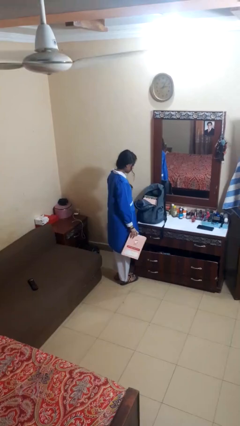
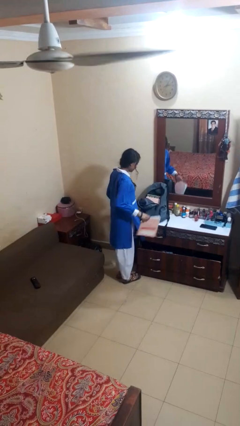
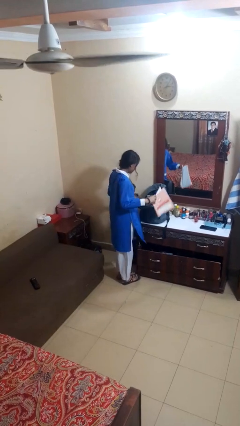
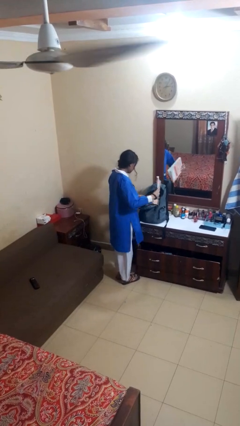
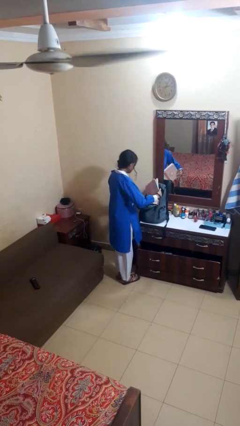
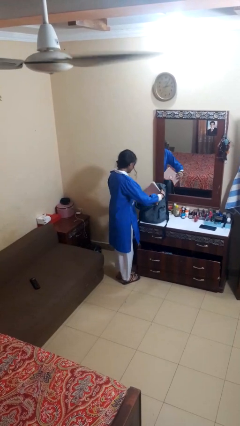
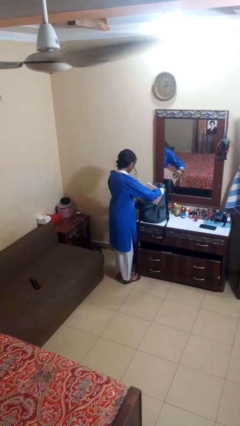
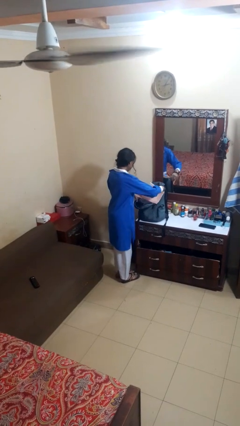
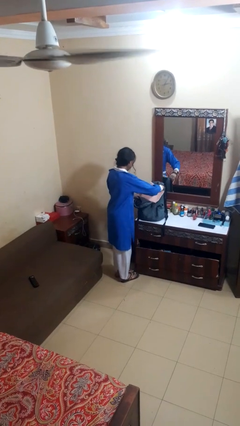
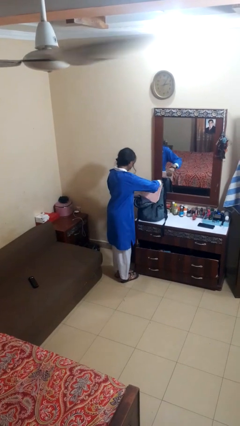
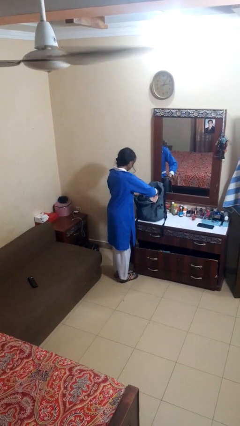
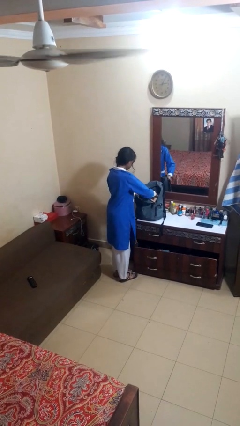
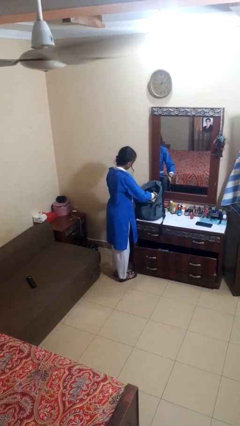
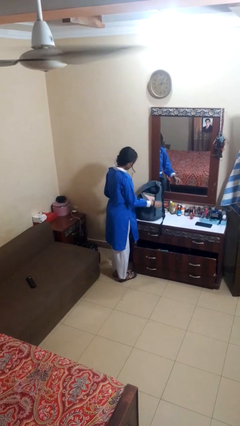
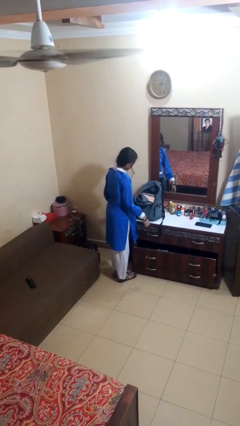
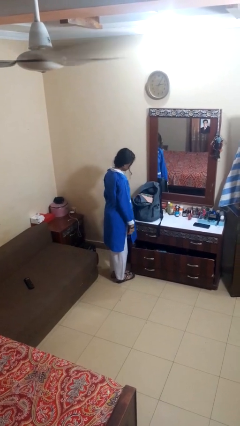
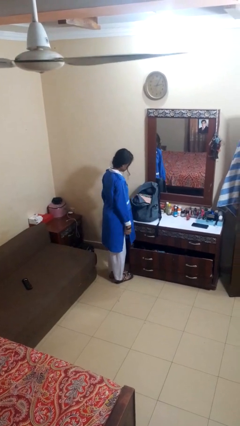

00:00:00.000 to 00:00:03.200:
person puts object into bag

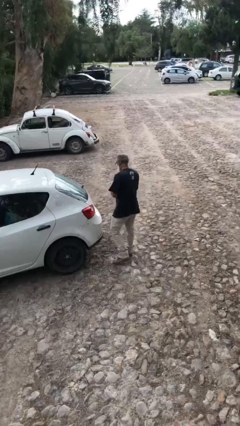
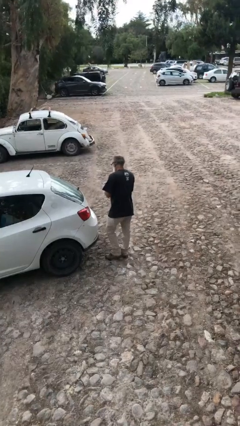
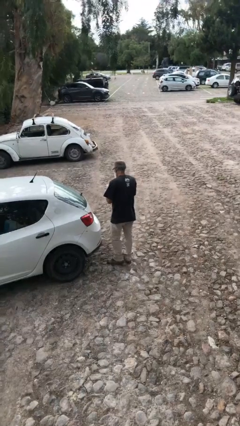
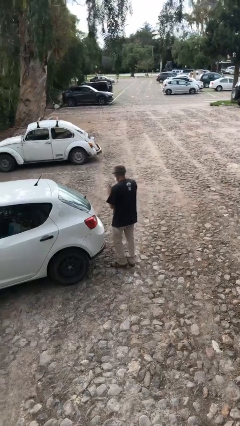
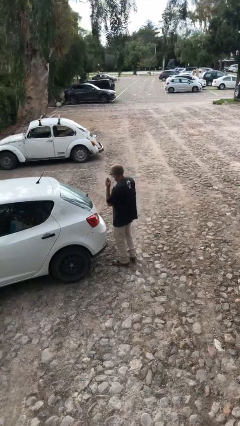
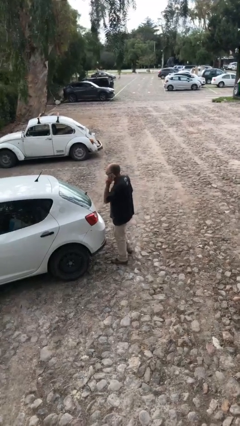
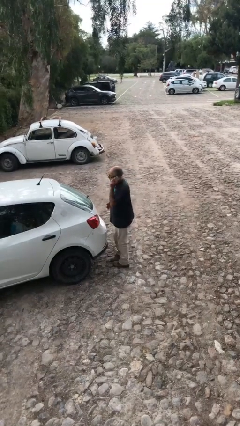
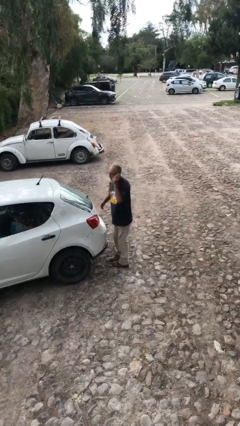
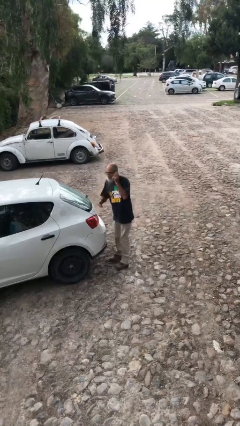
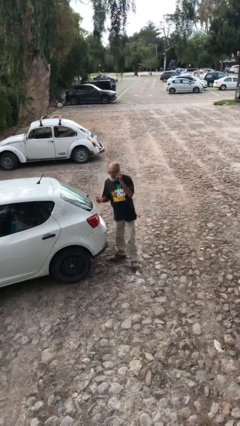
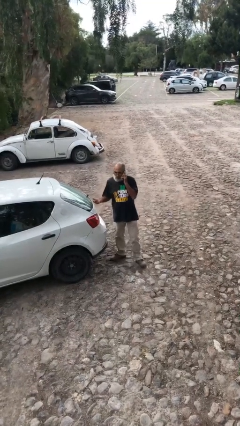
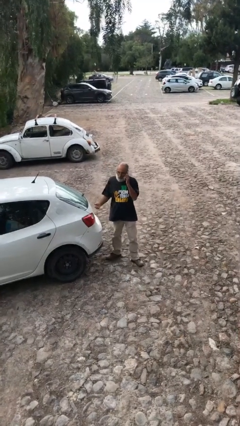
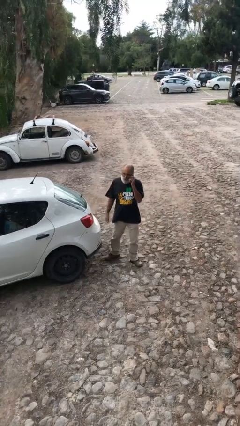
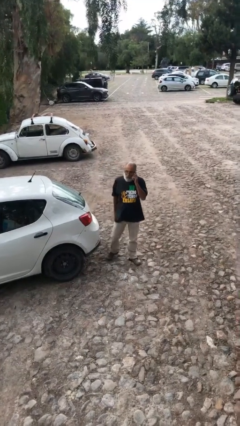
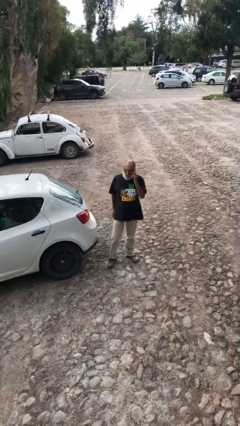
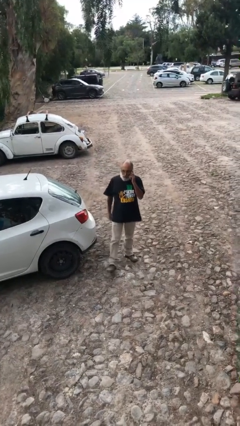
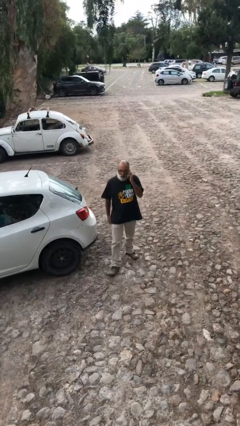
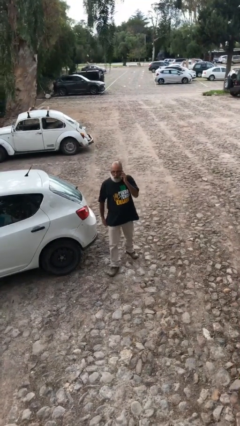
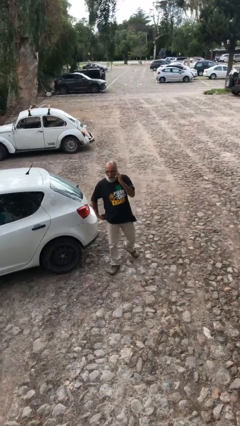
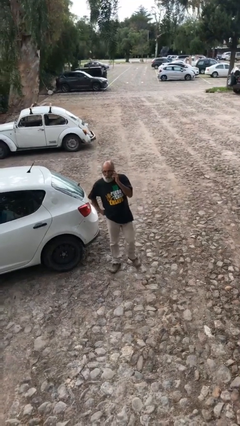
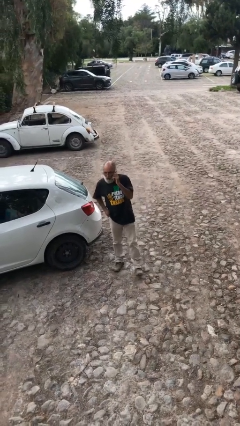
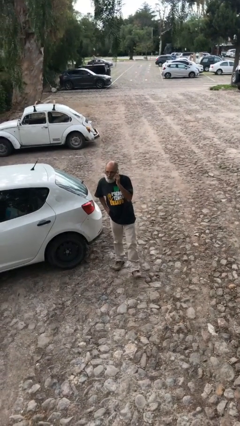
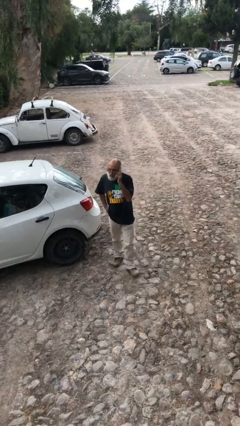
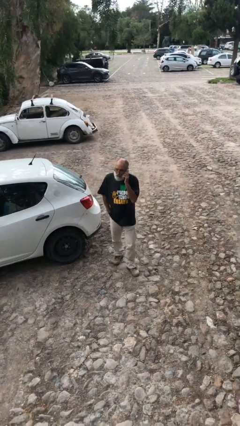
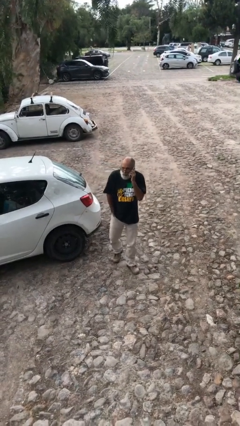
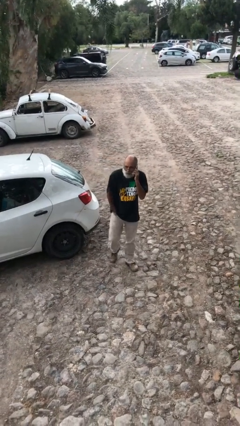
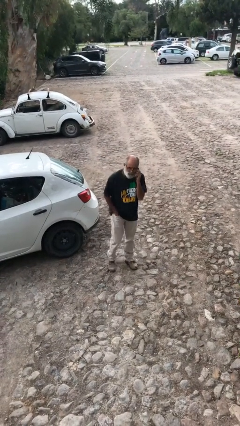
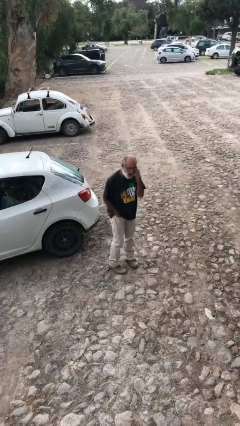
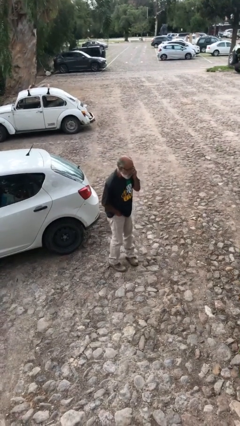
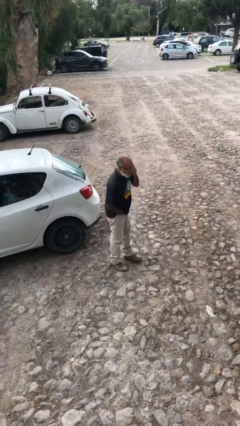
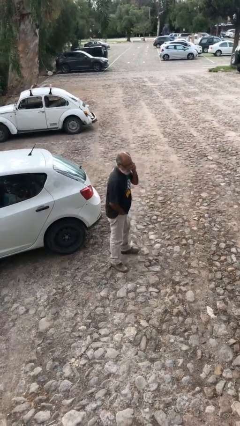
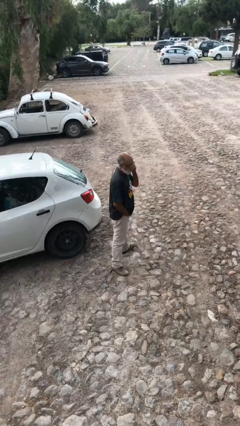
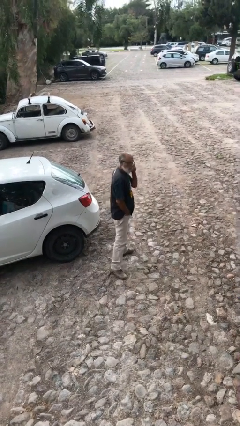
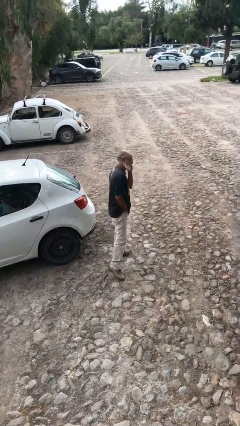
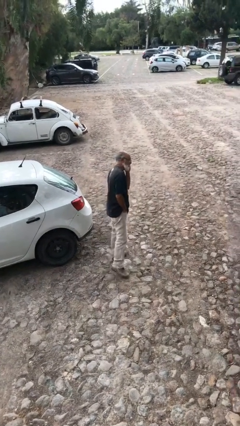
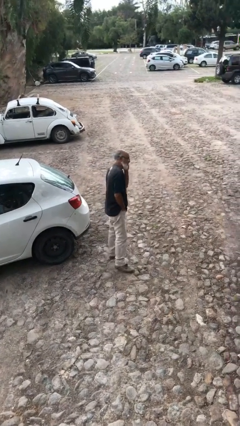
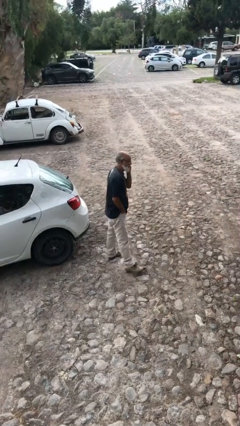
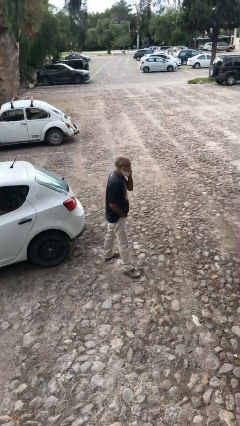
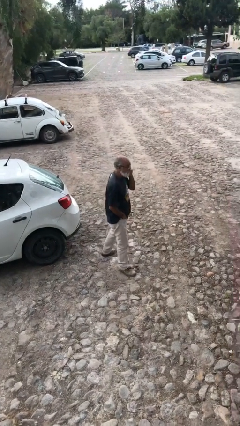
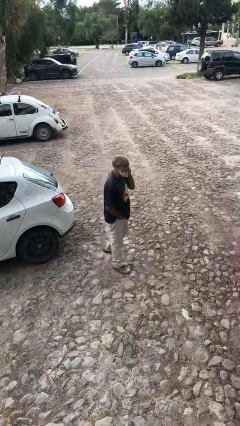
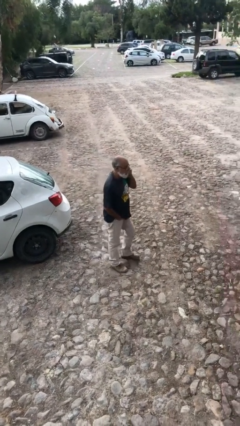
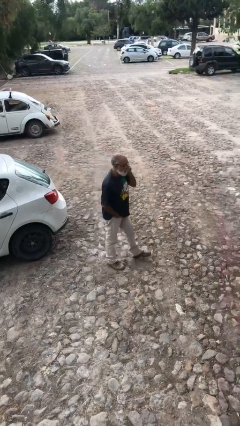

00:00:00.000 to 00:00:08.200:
person talks on phone

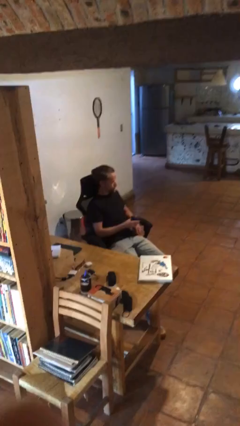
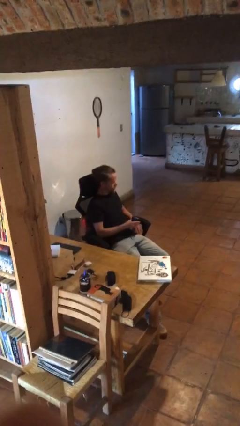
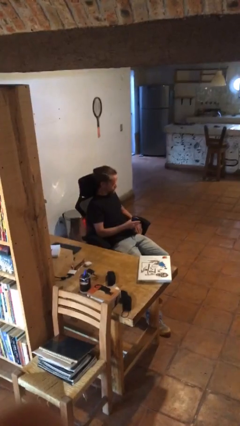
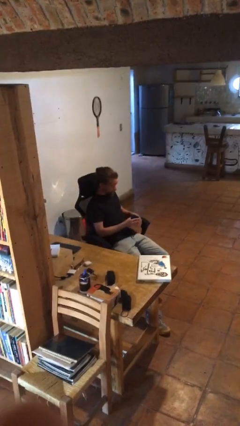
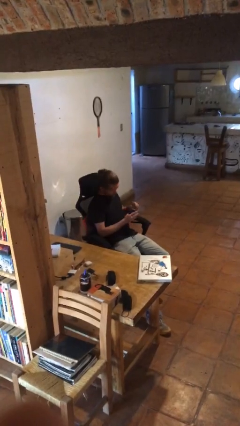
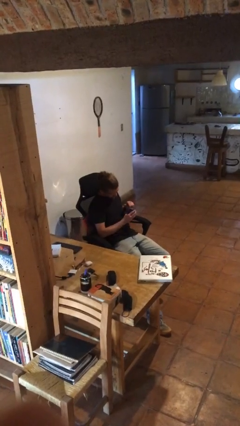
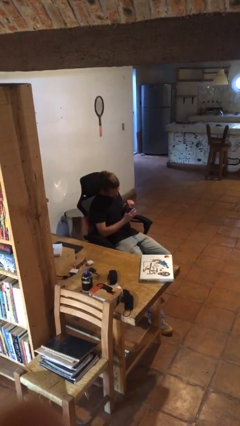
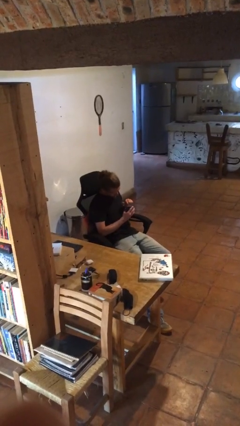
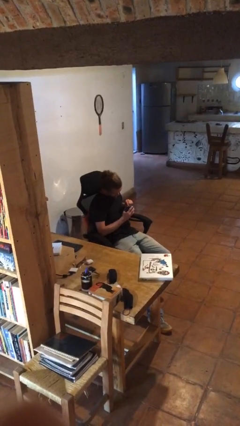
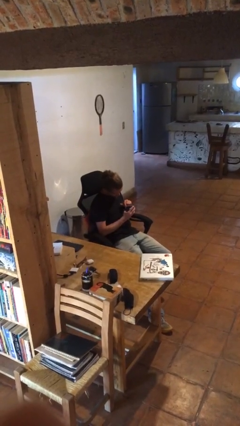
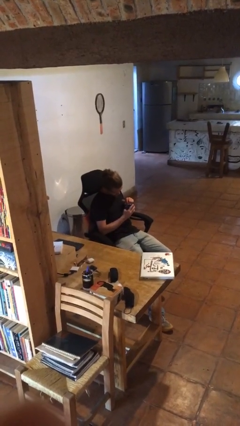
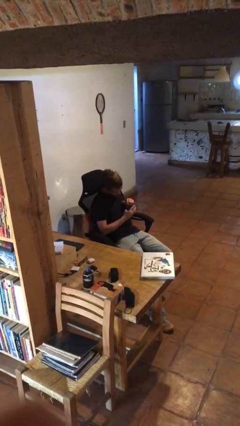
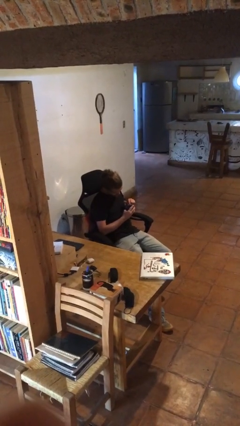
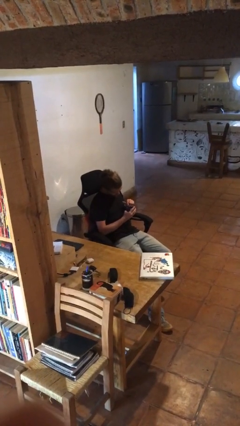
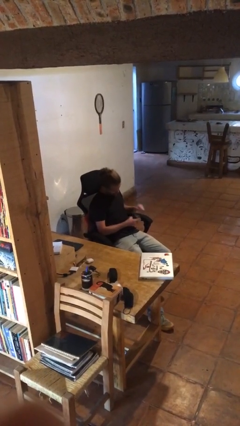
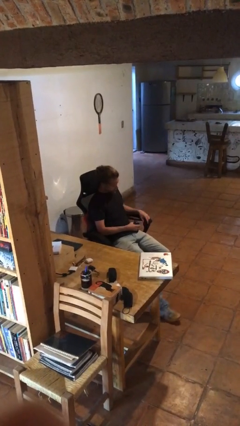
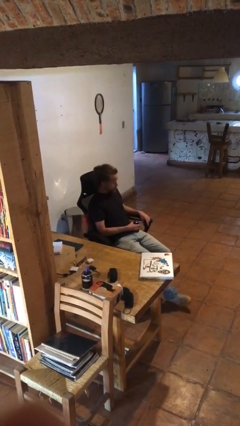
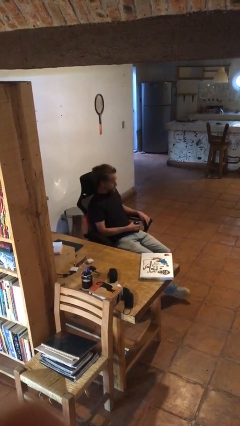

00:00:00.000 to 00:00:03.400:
person taps object with finger

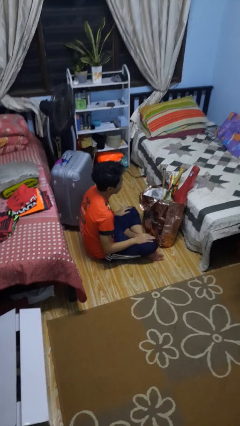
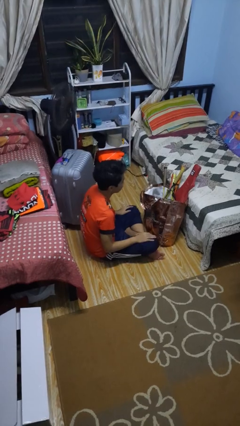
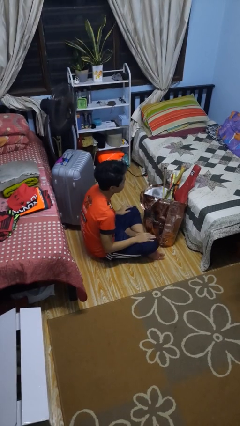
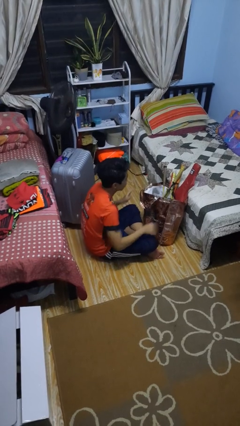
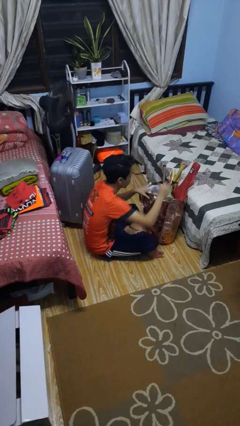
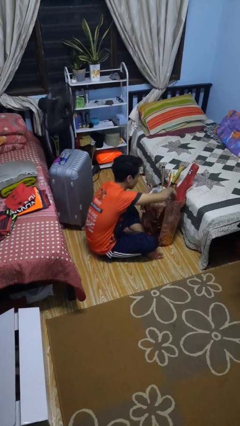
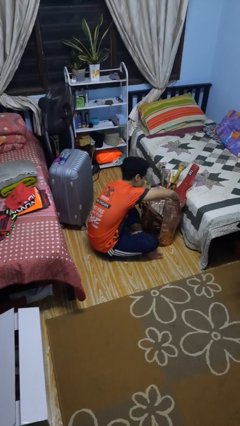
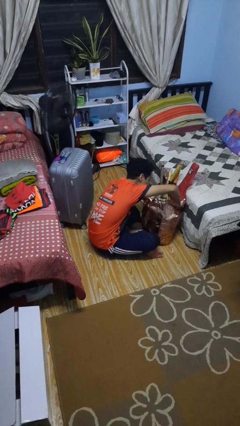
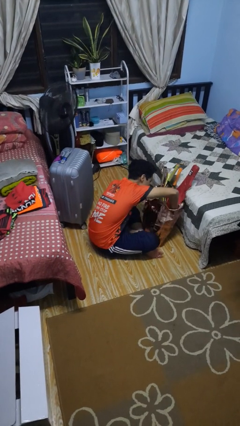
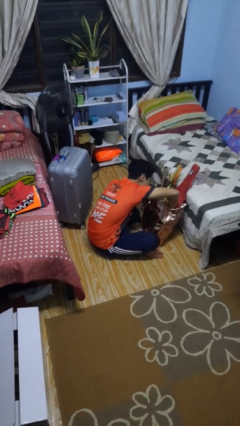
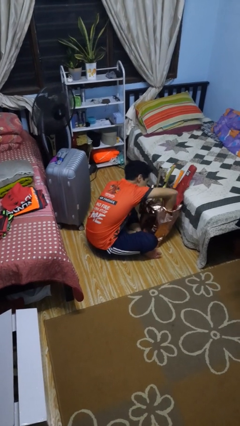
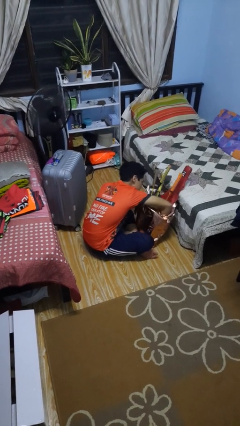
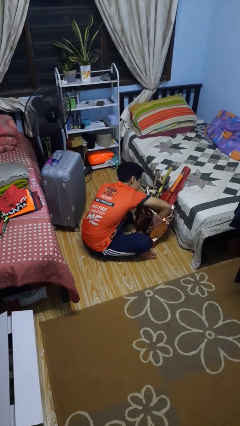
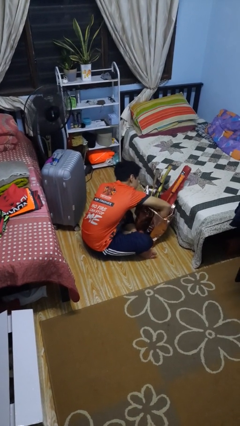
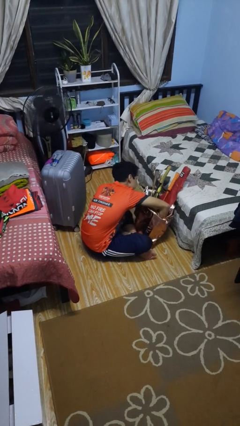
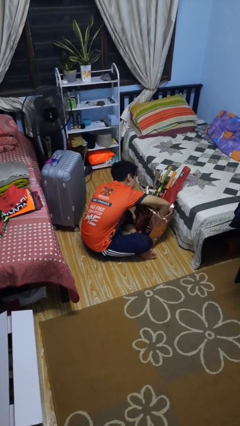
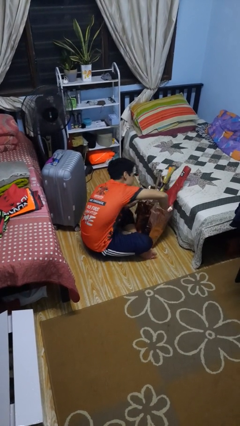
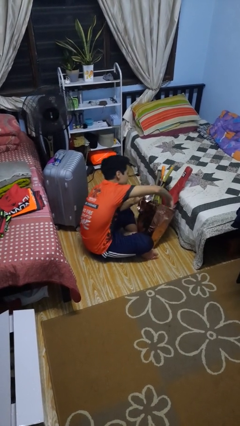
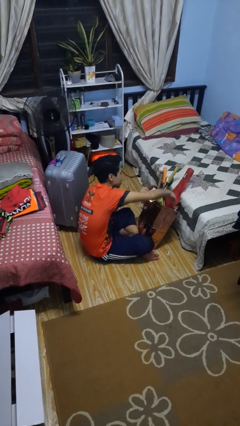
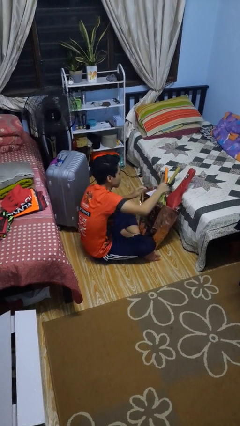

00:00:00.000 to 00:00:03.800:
person searches in bag
